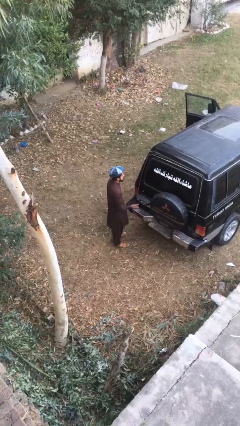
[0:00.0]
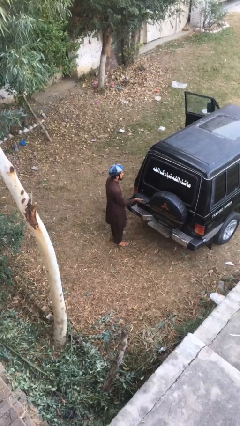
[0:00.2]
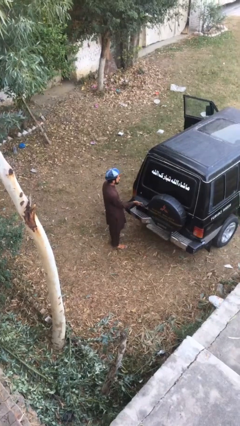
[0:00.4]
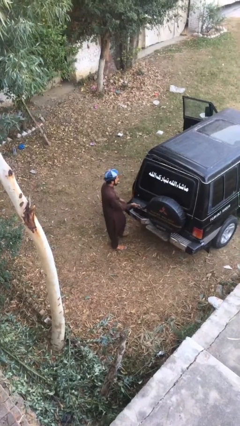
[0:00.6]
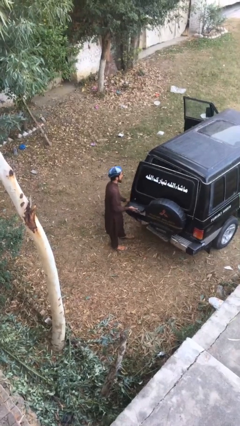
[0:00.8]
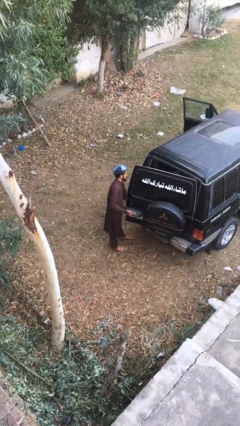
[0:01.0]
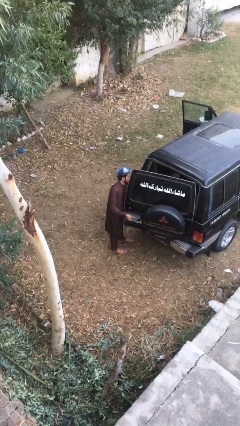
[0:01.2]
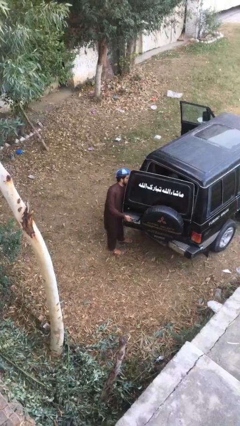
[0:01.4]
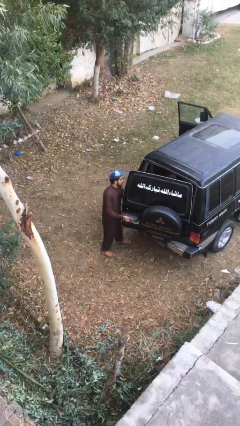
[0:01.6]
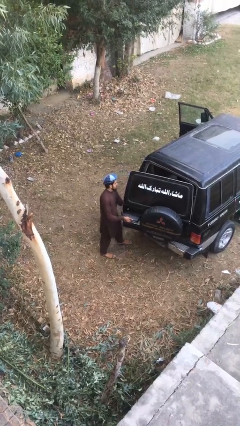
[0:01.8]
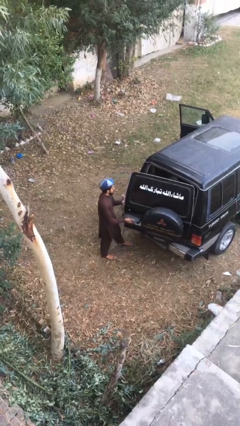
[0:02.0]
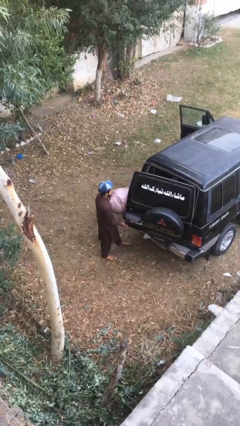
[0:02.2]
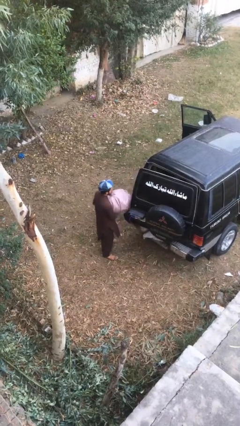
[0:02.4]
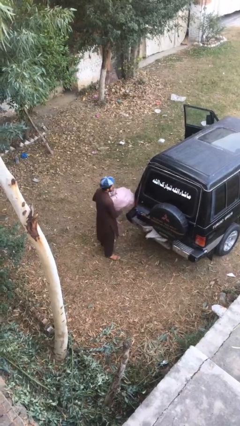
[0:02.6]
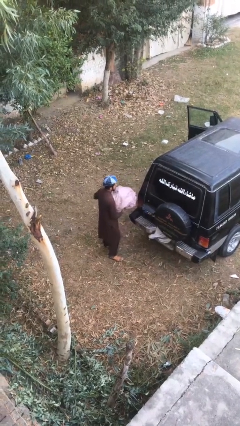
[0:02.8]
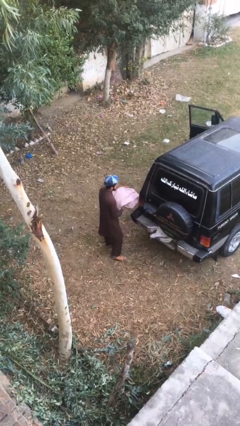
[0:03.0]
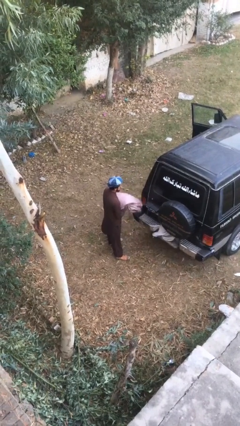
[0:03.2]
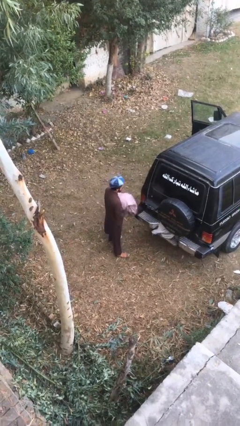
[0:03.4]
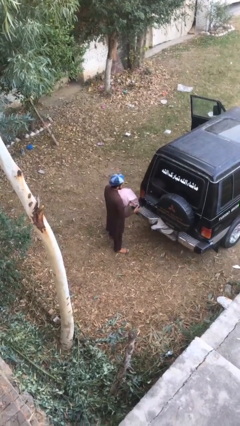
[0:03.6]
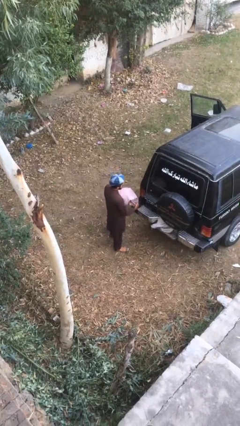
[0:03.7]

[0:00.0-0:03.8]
person unloads car

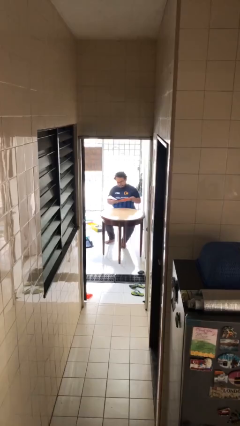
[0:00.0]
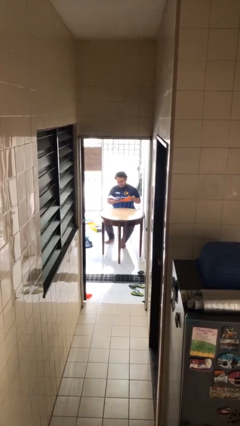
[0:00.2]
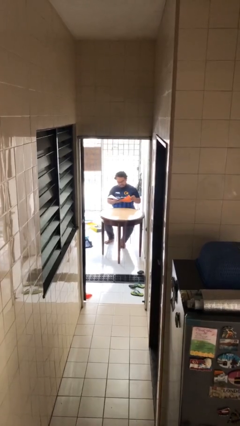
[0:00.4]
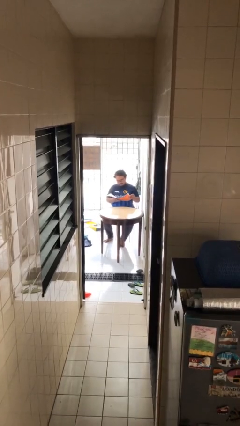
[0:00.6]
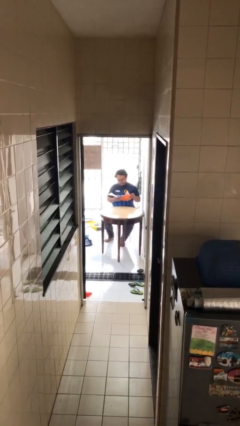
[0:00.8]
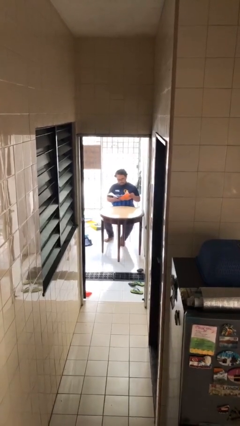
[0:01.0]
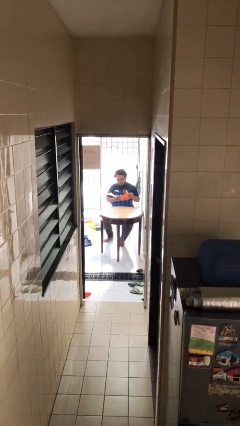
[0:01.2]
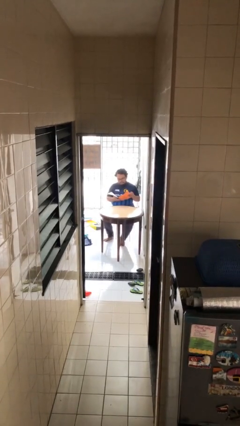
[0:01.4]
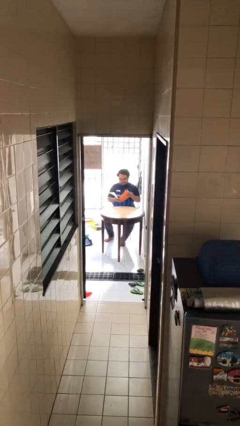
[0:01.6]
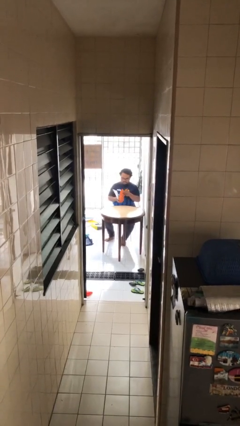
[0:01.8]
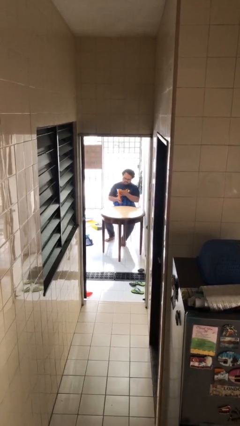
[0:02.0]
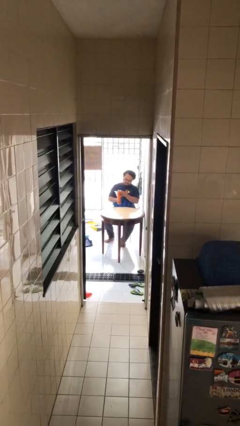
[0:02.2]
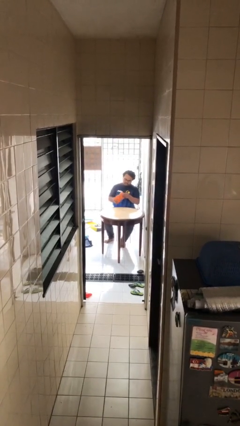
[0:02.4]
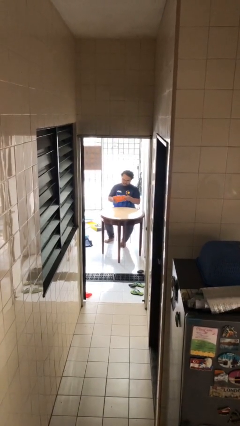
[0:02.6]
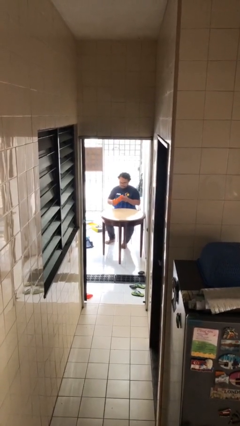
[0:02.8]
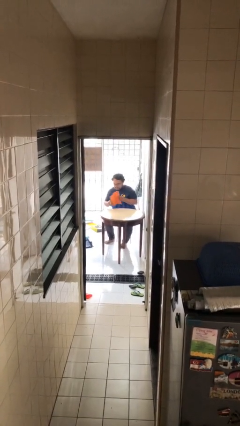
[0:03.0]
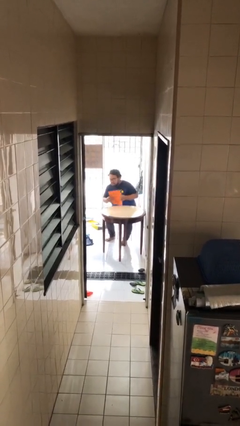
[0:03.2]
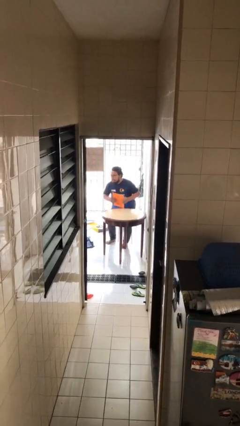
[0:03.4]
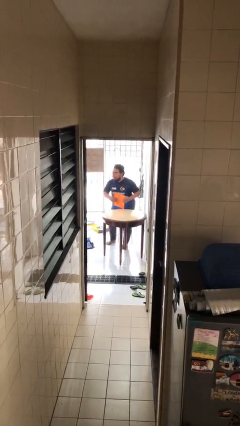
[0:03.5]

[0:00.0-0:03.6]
person reads document

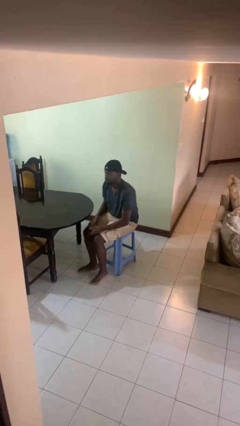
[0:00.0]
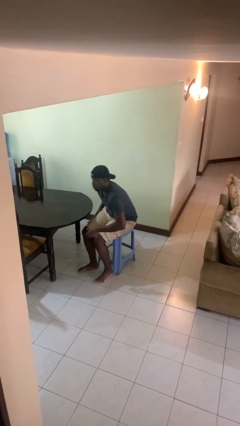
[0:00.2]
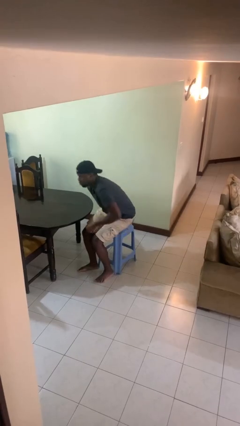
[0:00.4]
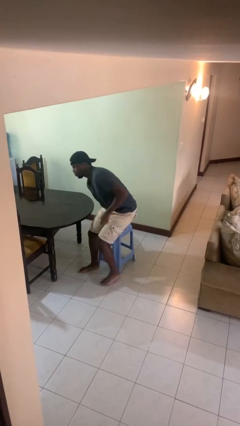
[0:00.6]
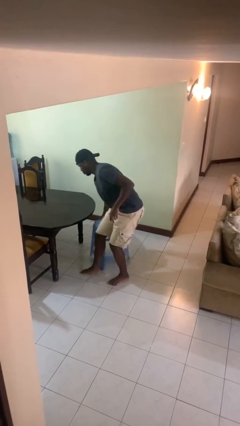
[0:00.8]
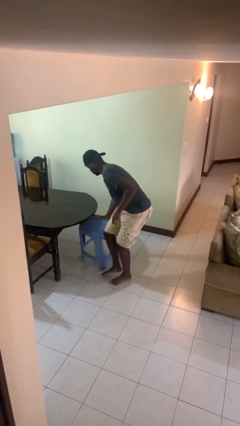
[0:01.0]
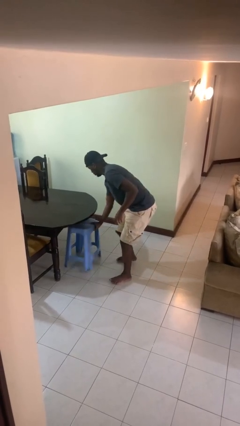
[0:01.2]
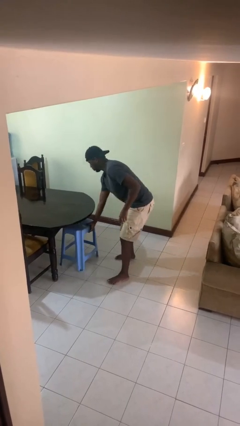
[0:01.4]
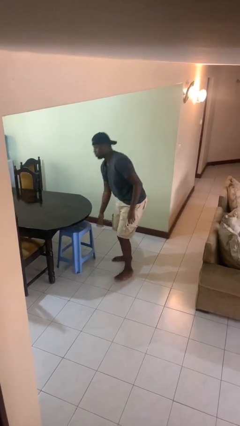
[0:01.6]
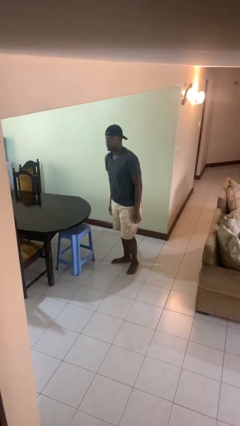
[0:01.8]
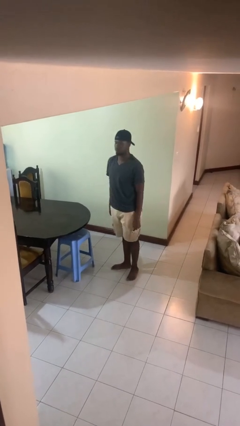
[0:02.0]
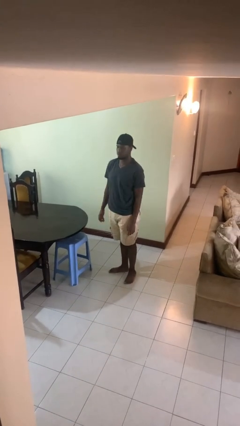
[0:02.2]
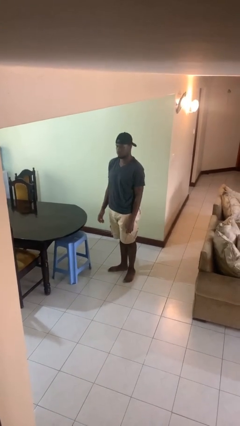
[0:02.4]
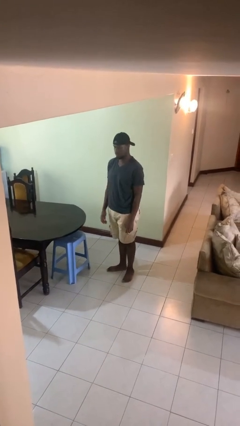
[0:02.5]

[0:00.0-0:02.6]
person stands up

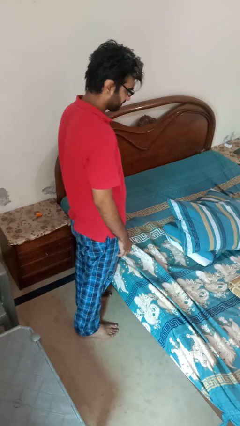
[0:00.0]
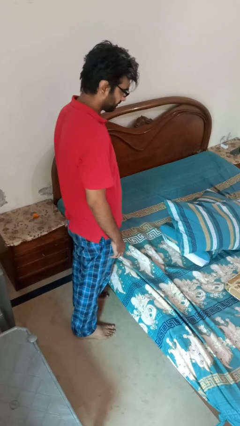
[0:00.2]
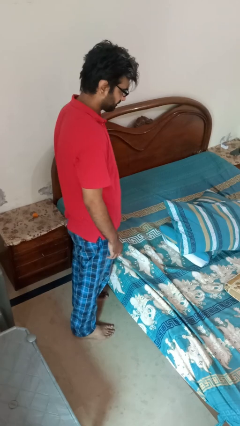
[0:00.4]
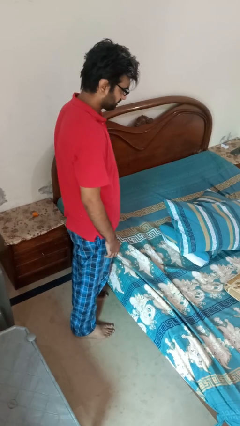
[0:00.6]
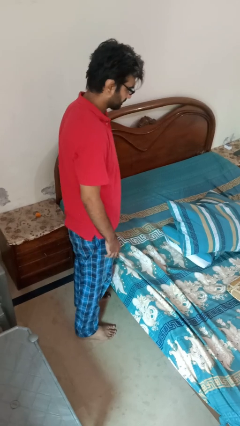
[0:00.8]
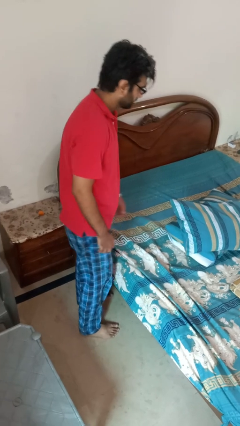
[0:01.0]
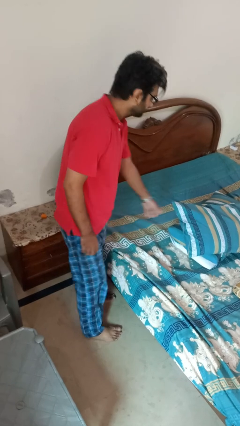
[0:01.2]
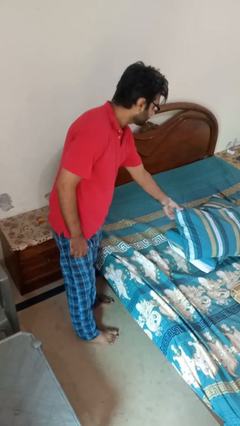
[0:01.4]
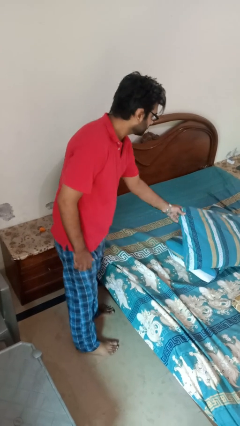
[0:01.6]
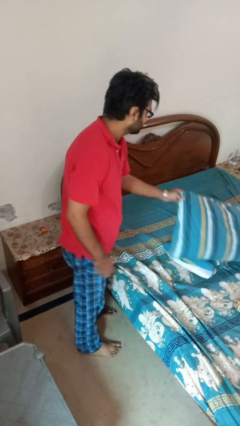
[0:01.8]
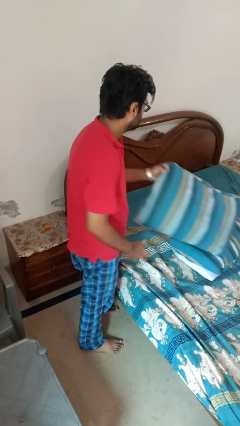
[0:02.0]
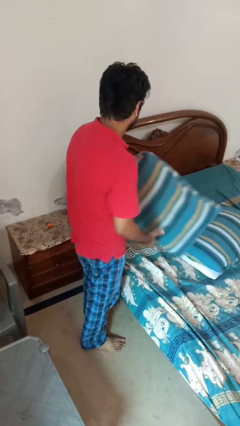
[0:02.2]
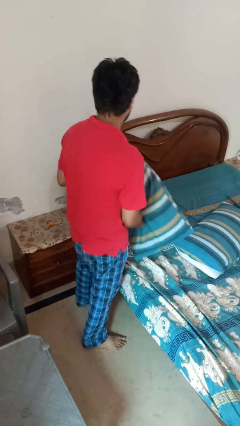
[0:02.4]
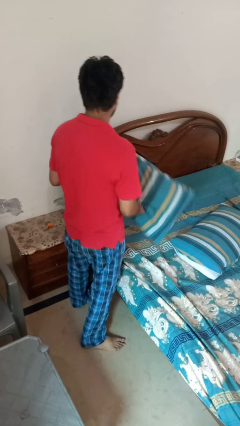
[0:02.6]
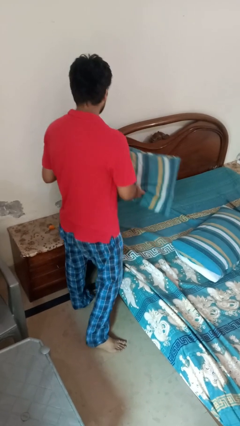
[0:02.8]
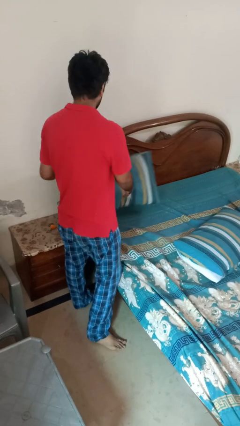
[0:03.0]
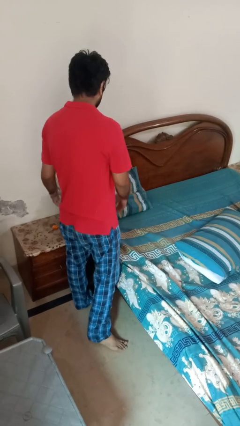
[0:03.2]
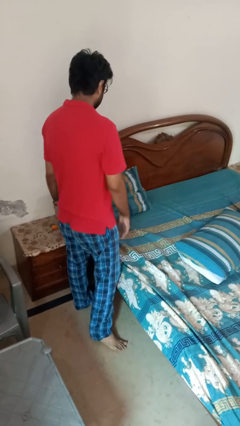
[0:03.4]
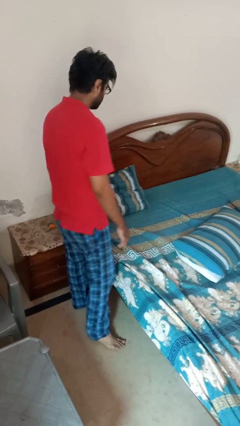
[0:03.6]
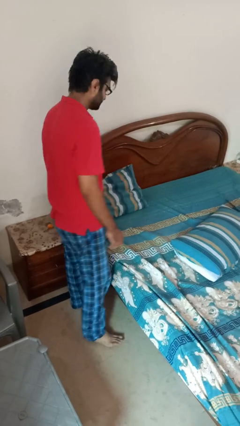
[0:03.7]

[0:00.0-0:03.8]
person makes bed

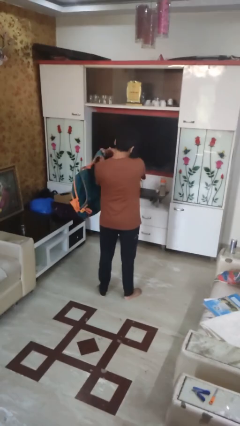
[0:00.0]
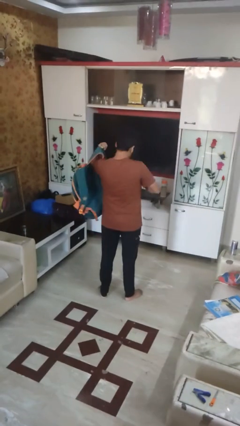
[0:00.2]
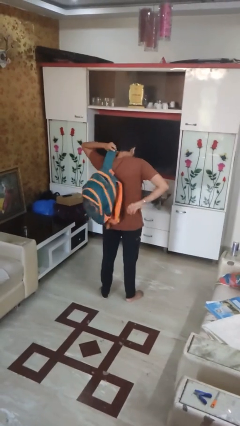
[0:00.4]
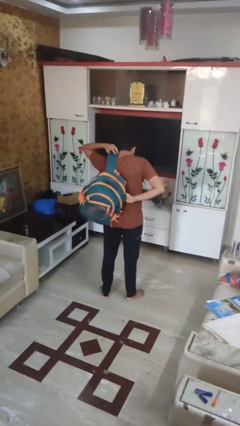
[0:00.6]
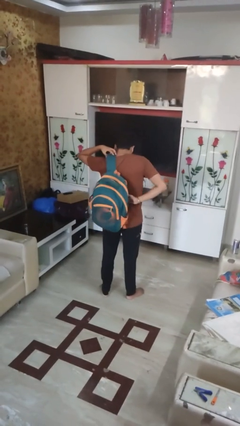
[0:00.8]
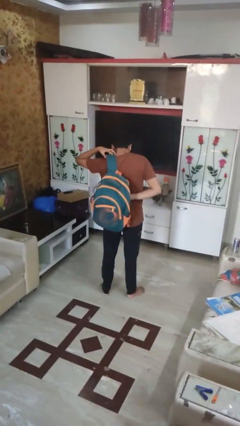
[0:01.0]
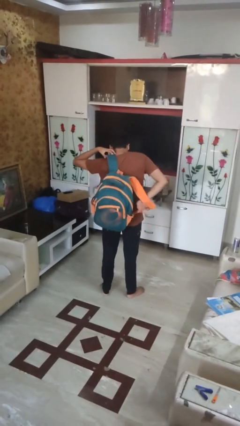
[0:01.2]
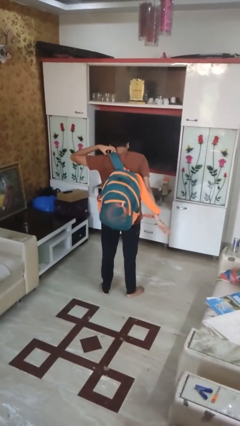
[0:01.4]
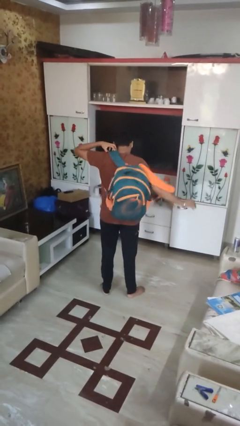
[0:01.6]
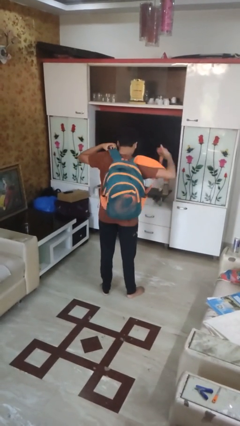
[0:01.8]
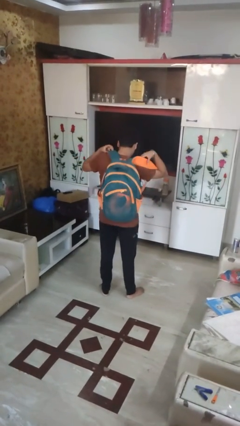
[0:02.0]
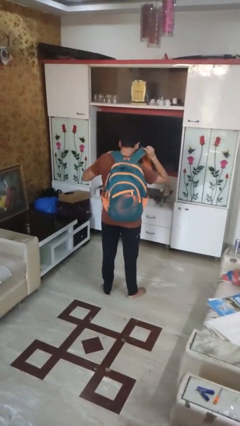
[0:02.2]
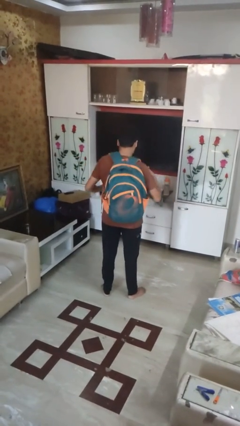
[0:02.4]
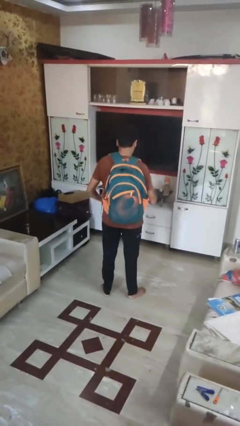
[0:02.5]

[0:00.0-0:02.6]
person puts on backpack

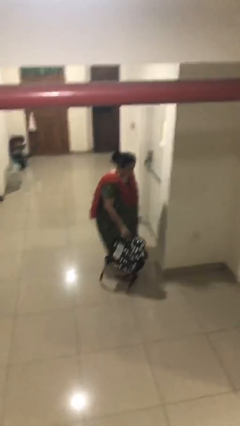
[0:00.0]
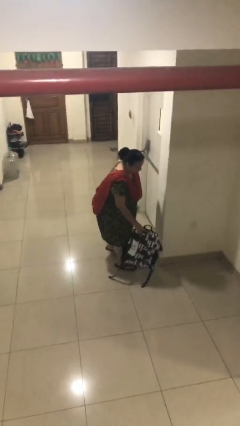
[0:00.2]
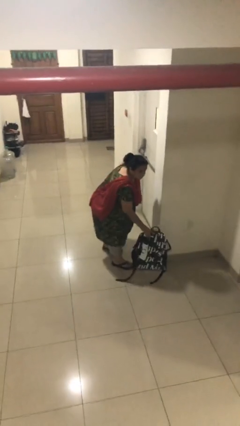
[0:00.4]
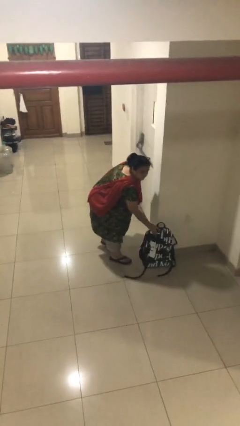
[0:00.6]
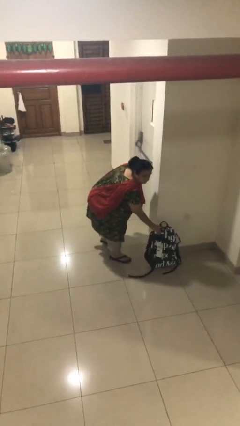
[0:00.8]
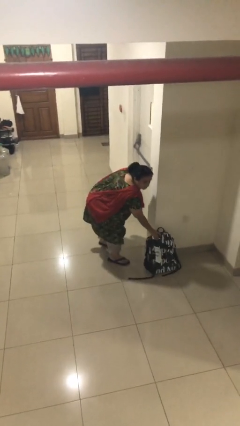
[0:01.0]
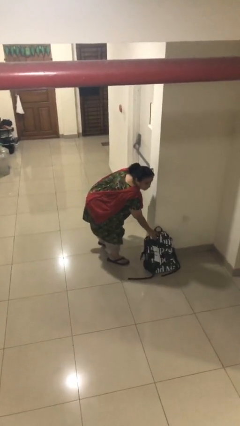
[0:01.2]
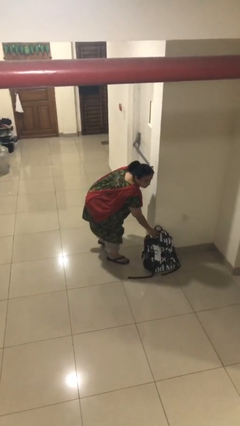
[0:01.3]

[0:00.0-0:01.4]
person puts down object on floor
